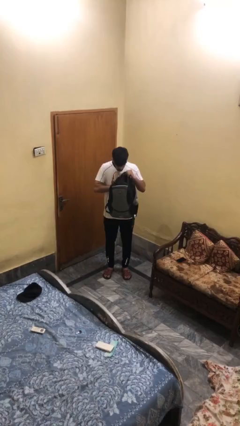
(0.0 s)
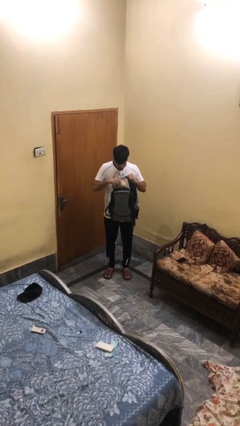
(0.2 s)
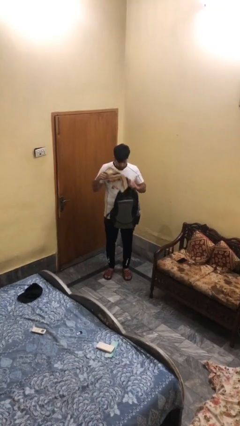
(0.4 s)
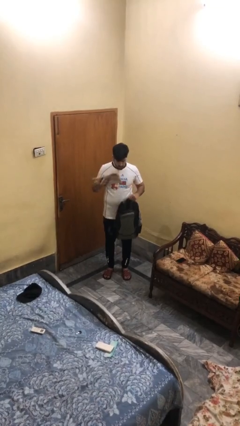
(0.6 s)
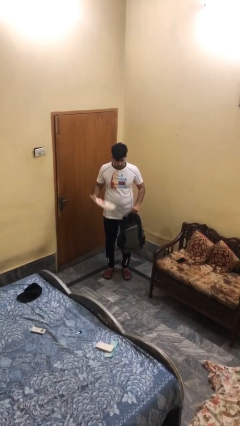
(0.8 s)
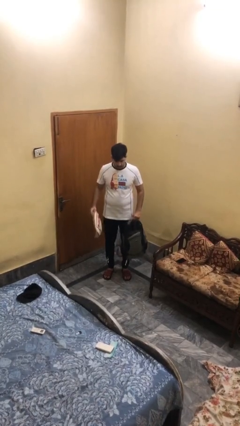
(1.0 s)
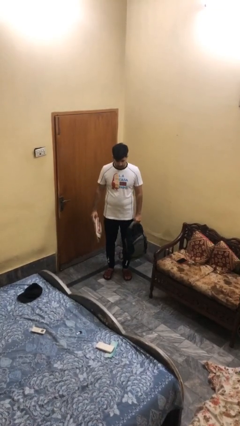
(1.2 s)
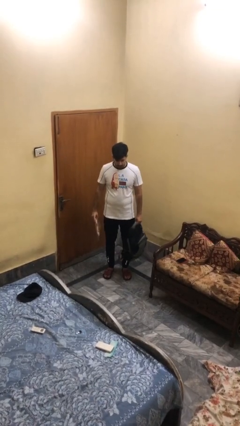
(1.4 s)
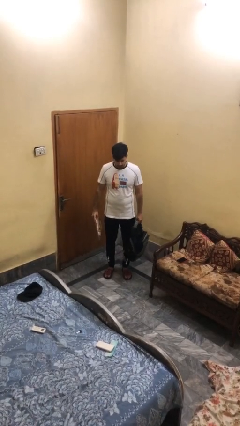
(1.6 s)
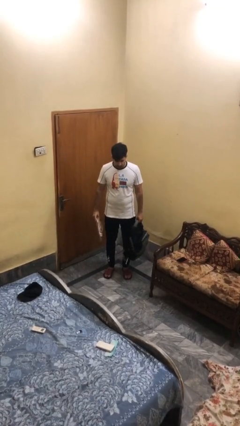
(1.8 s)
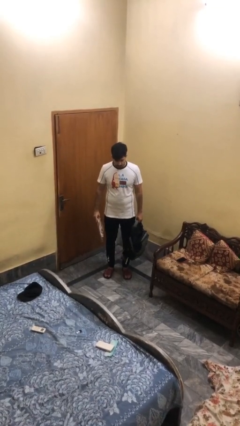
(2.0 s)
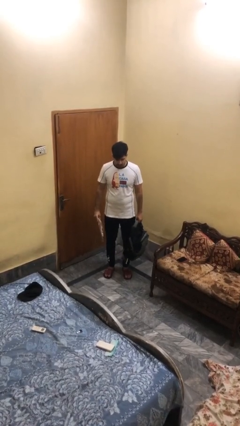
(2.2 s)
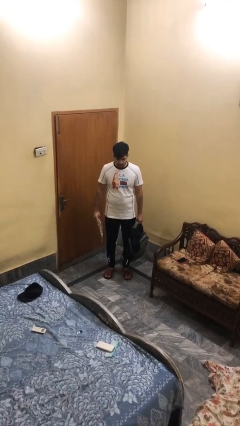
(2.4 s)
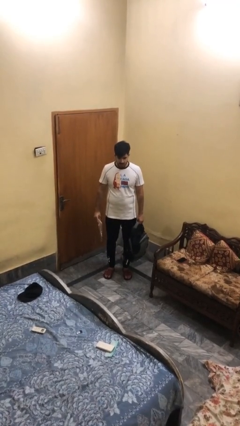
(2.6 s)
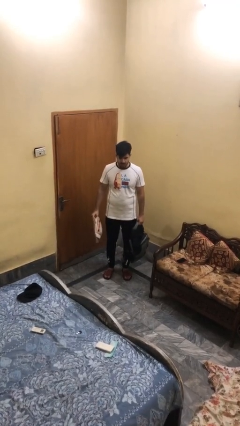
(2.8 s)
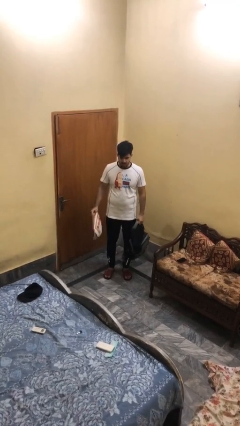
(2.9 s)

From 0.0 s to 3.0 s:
person takes object from backpack

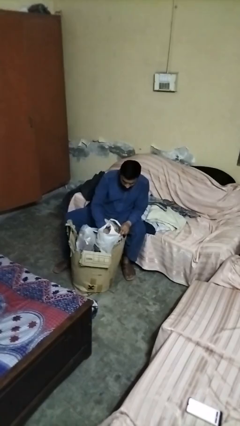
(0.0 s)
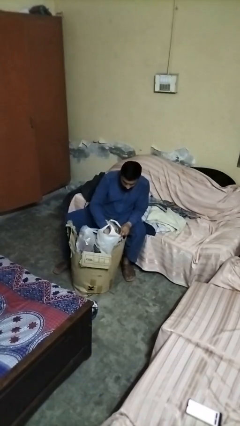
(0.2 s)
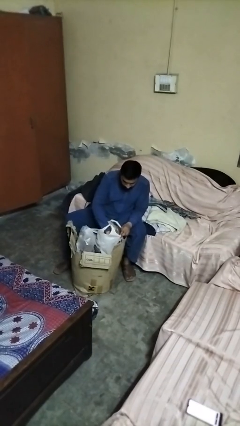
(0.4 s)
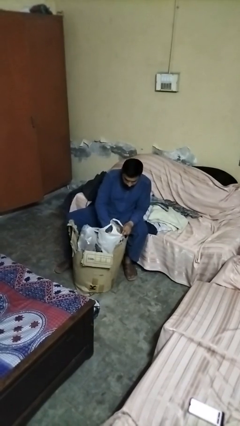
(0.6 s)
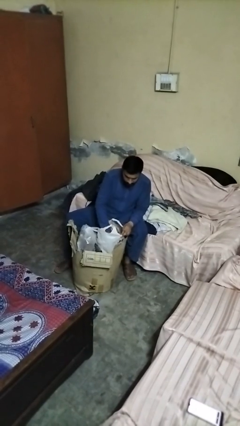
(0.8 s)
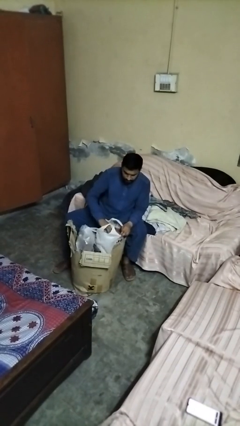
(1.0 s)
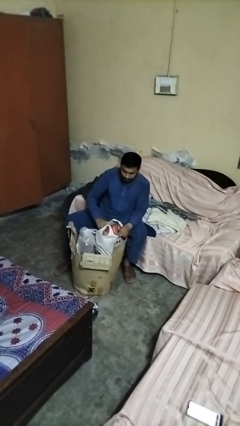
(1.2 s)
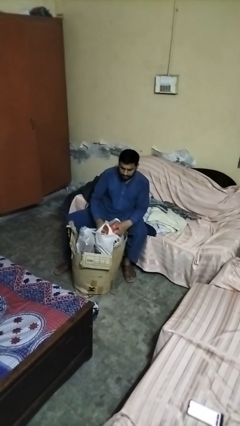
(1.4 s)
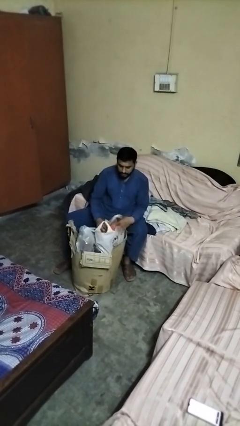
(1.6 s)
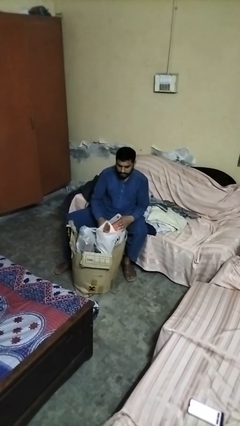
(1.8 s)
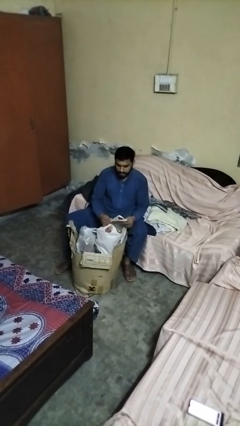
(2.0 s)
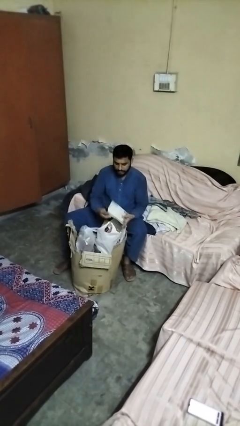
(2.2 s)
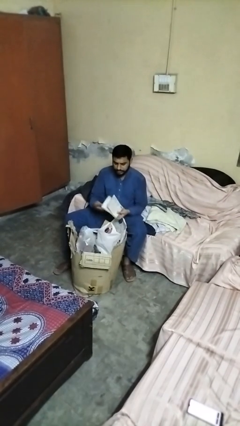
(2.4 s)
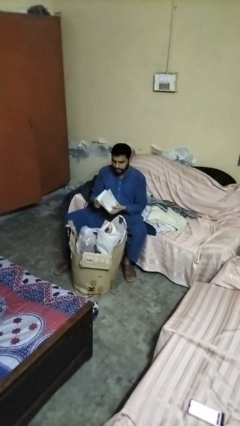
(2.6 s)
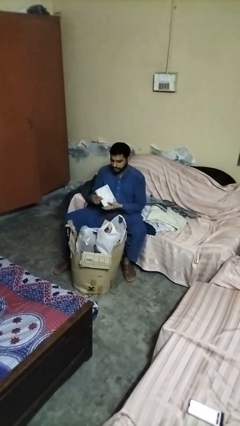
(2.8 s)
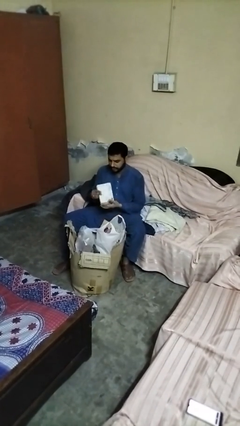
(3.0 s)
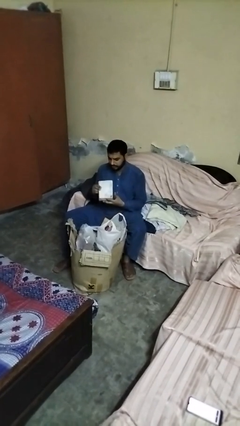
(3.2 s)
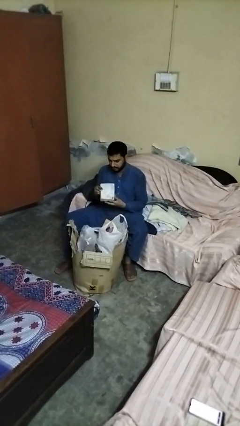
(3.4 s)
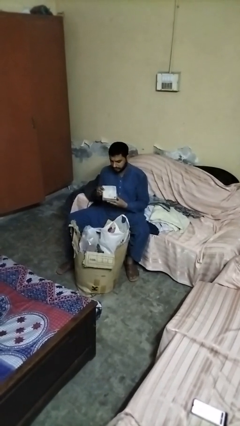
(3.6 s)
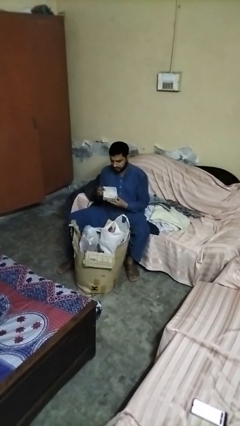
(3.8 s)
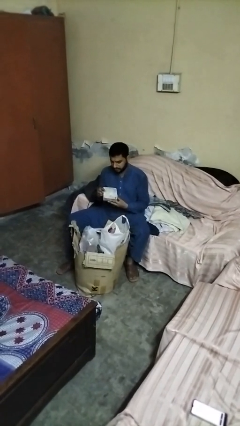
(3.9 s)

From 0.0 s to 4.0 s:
person takes object from box

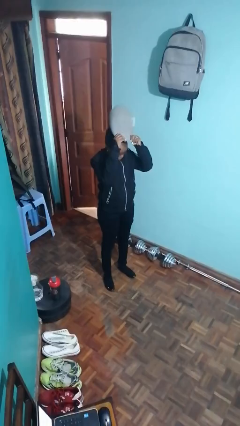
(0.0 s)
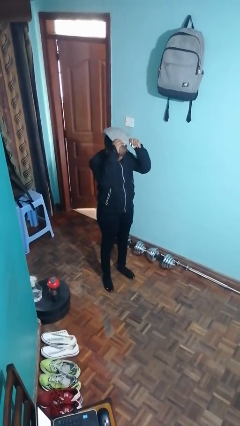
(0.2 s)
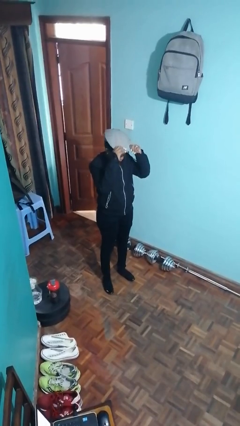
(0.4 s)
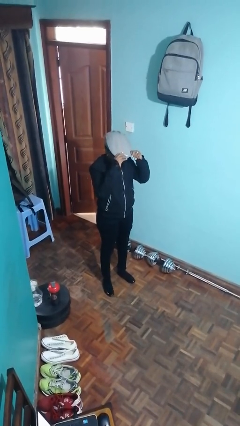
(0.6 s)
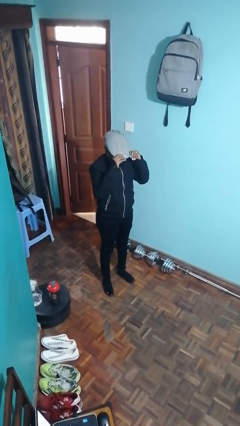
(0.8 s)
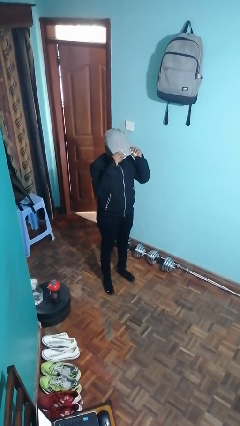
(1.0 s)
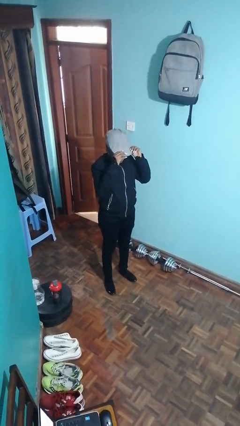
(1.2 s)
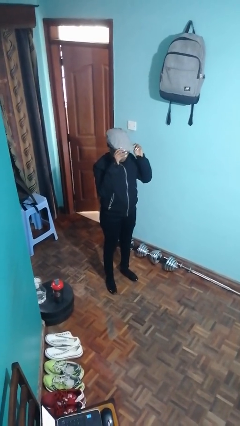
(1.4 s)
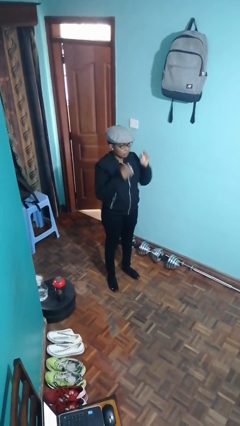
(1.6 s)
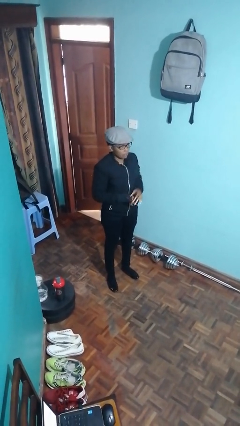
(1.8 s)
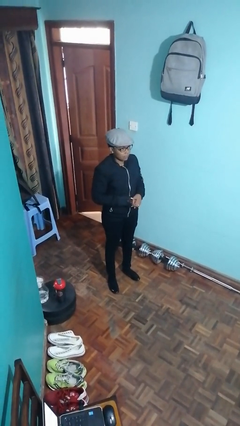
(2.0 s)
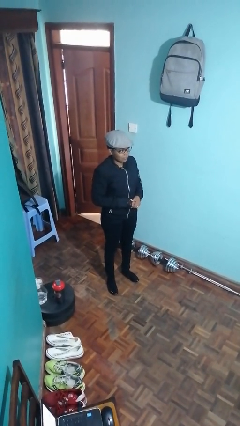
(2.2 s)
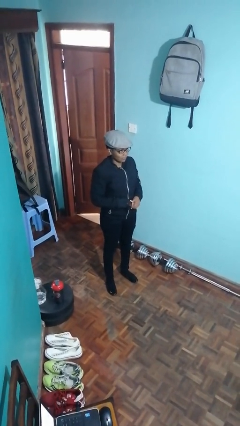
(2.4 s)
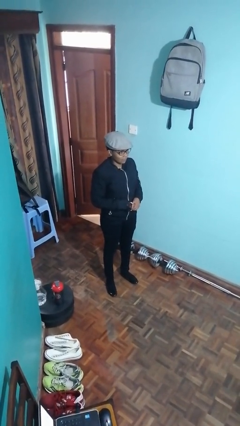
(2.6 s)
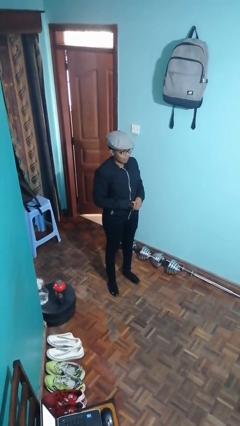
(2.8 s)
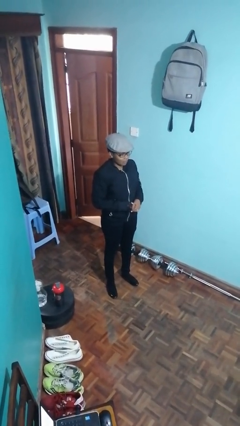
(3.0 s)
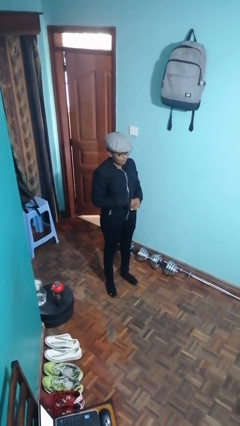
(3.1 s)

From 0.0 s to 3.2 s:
person puts on hat

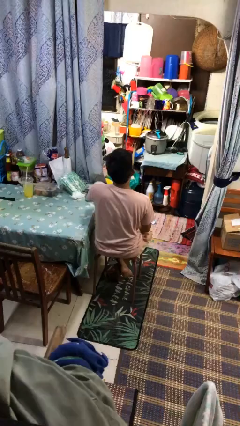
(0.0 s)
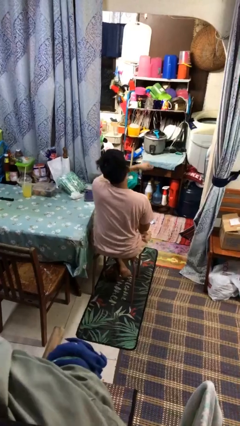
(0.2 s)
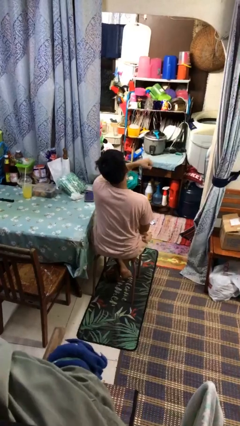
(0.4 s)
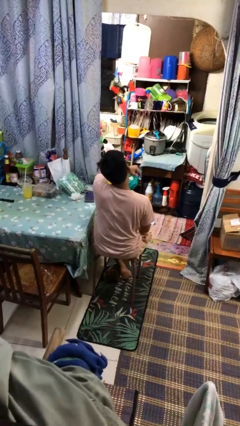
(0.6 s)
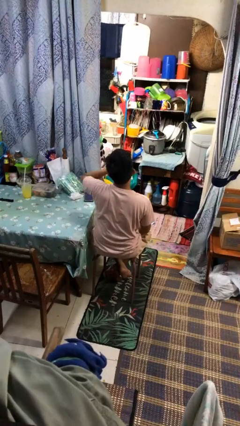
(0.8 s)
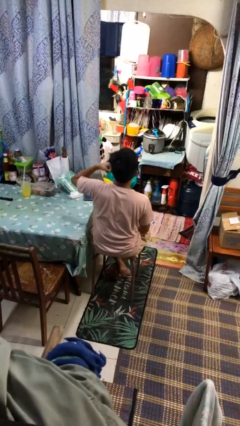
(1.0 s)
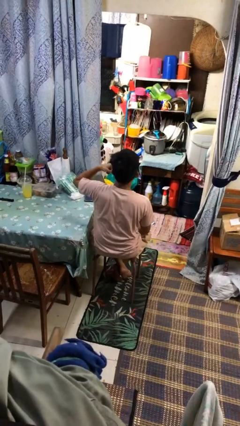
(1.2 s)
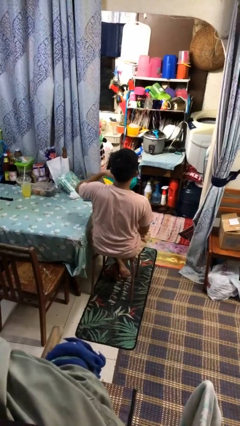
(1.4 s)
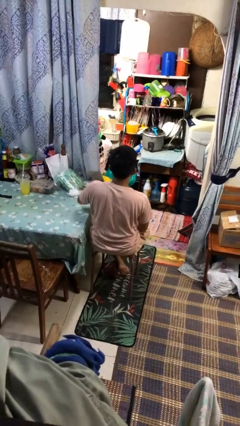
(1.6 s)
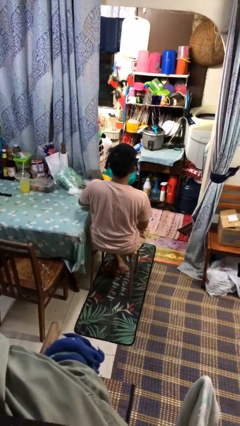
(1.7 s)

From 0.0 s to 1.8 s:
person gestures cut

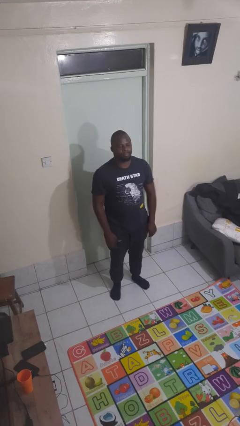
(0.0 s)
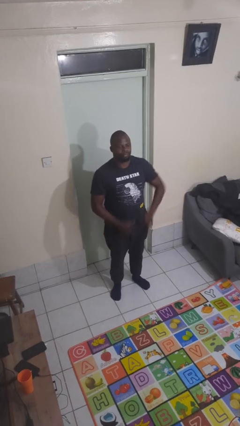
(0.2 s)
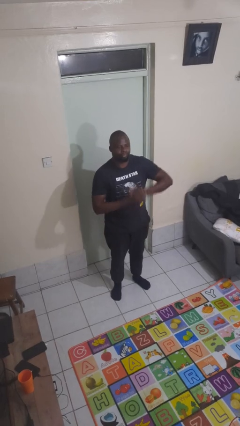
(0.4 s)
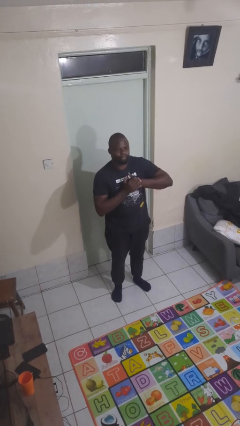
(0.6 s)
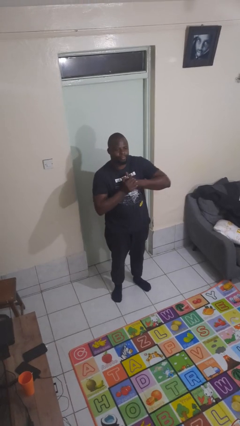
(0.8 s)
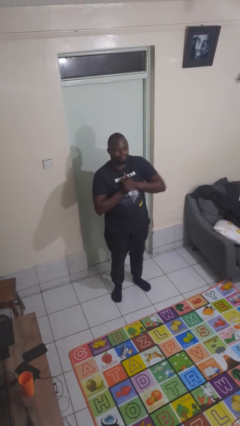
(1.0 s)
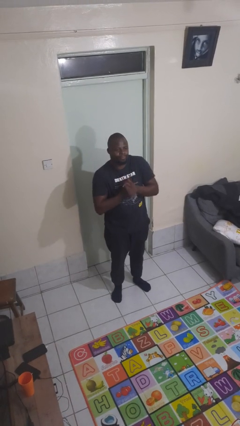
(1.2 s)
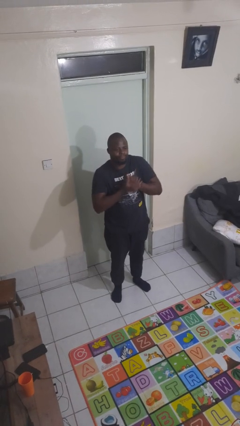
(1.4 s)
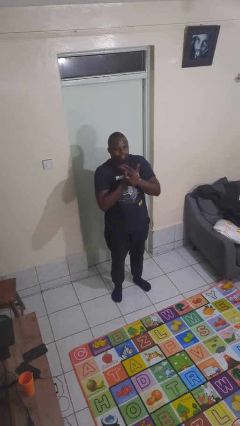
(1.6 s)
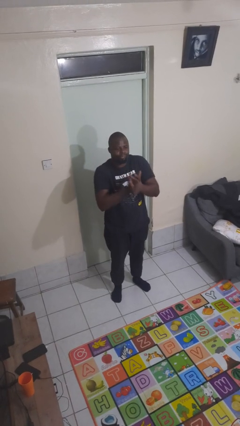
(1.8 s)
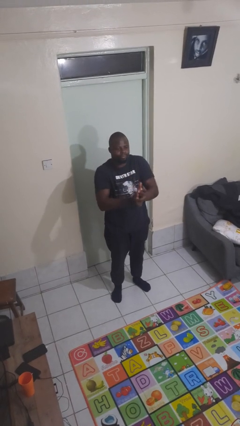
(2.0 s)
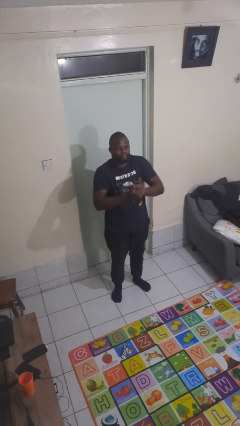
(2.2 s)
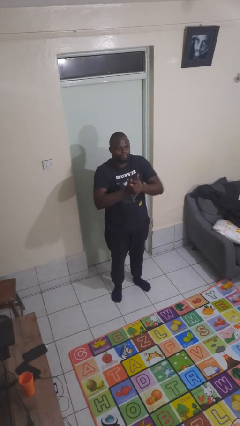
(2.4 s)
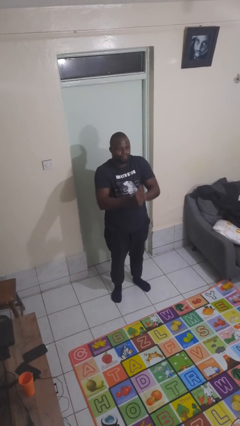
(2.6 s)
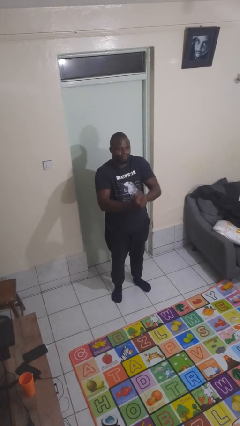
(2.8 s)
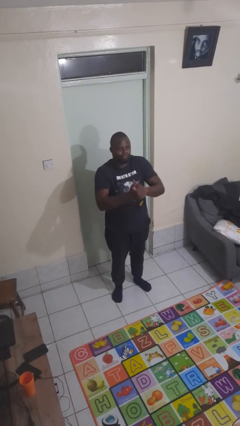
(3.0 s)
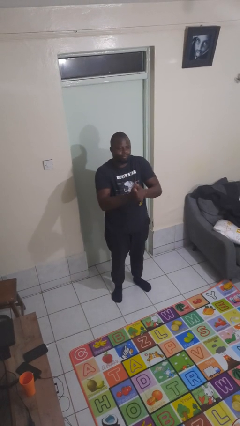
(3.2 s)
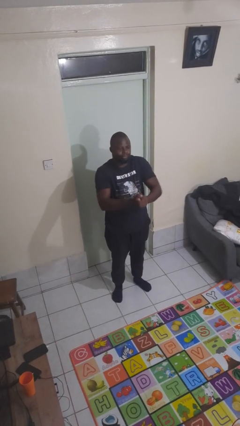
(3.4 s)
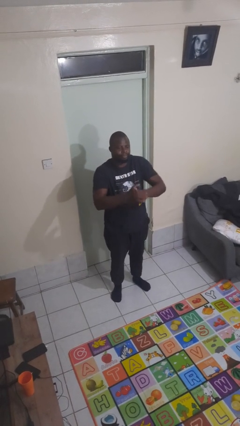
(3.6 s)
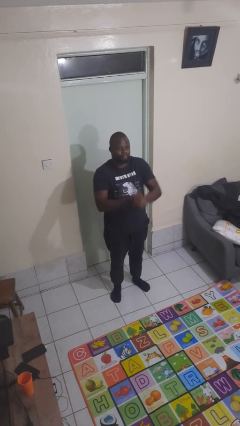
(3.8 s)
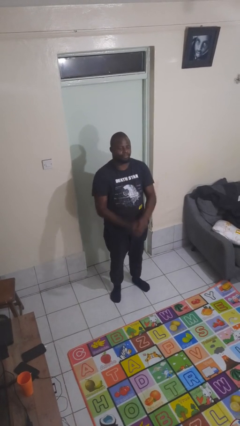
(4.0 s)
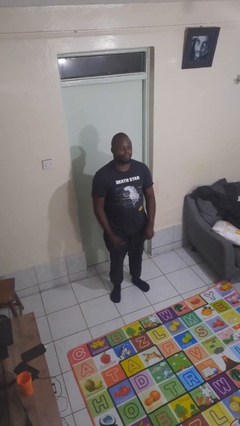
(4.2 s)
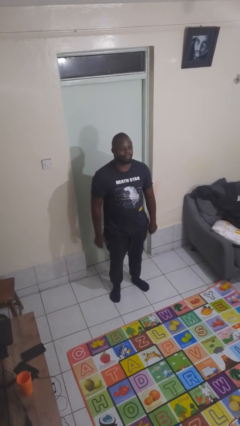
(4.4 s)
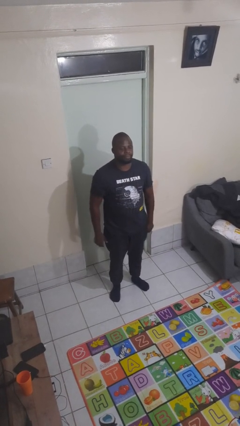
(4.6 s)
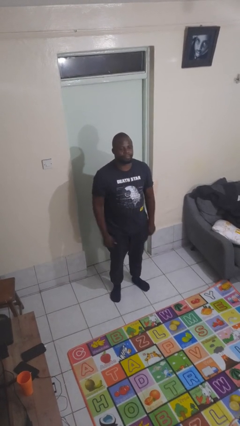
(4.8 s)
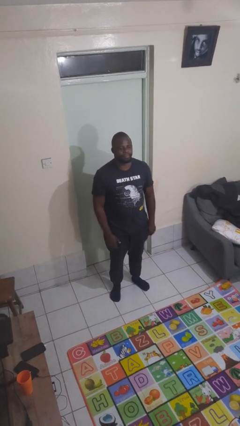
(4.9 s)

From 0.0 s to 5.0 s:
person cracks knuckles

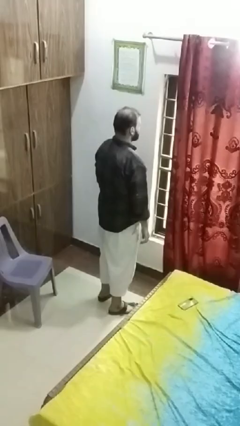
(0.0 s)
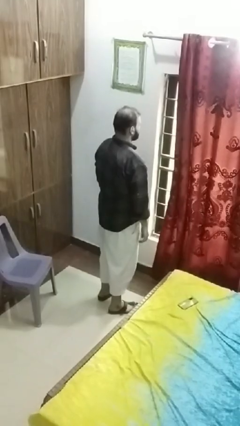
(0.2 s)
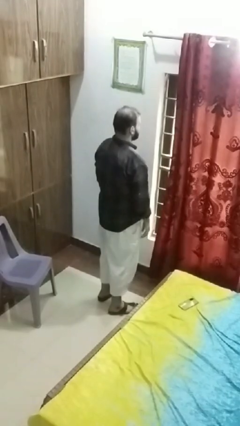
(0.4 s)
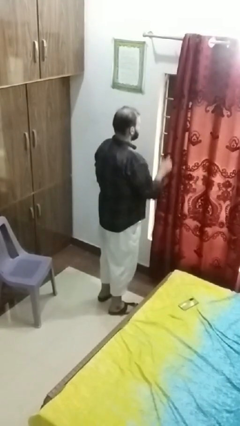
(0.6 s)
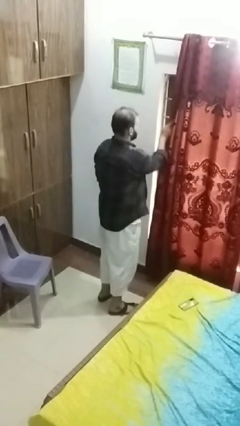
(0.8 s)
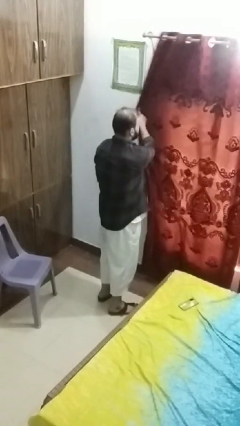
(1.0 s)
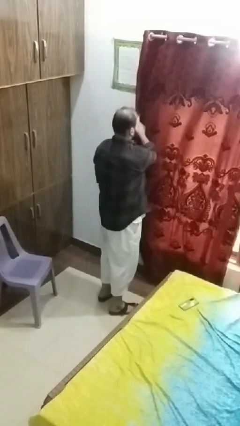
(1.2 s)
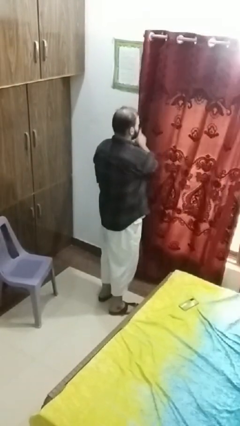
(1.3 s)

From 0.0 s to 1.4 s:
person closes curtains
